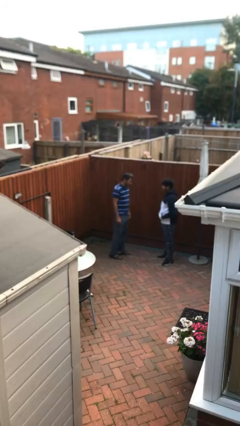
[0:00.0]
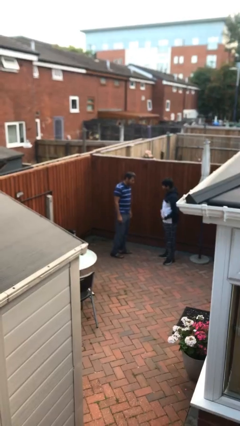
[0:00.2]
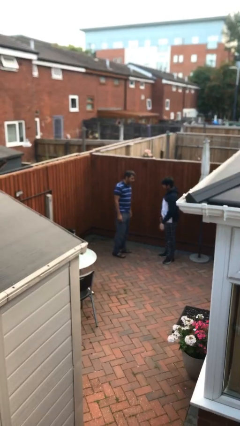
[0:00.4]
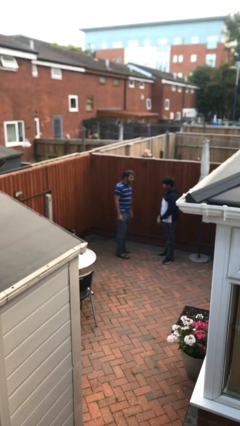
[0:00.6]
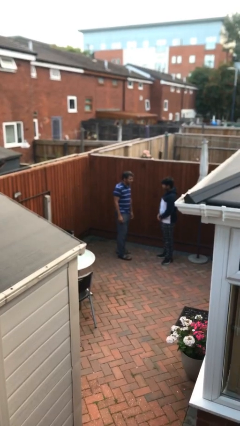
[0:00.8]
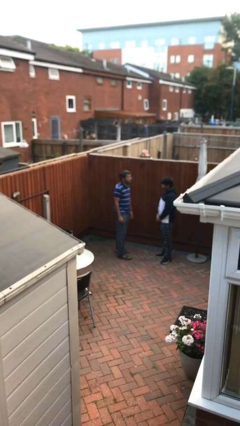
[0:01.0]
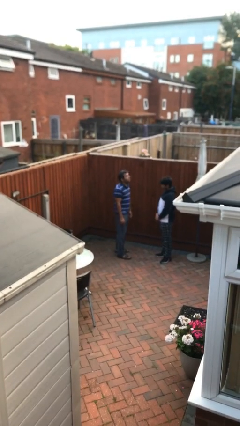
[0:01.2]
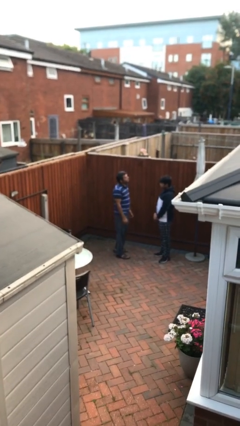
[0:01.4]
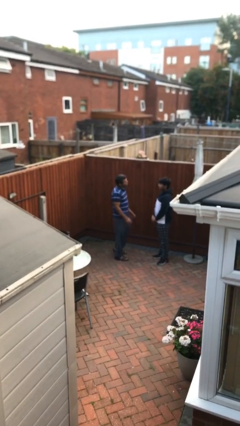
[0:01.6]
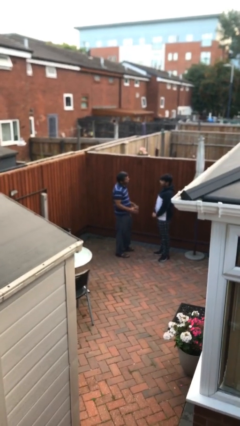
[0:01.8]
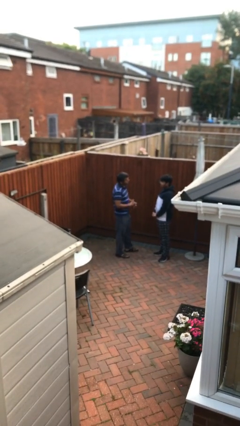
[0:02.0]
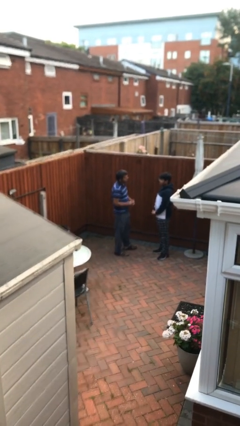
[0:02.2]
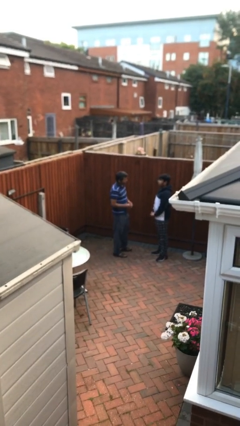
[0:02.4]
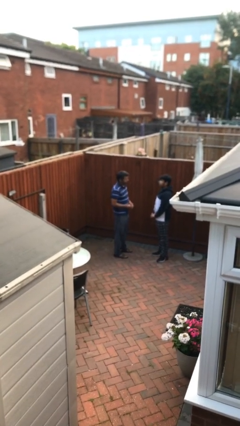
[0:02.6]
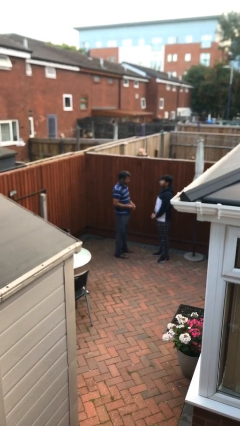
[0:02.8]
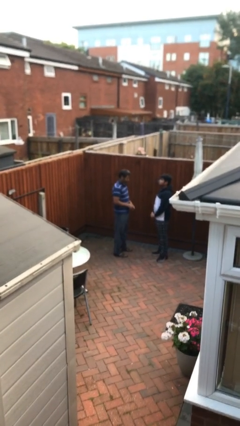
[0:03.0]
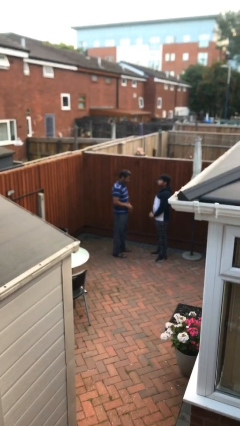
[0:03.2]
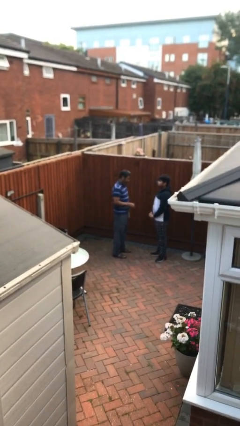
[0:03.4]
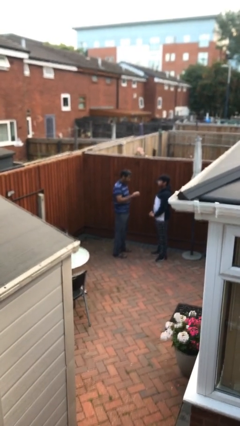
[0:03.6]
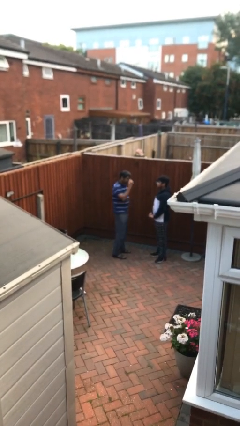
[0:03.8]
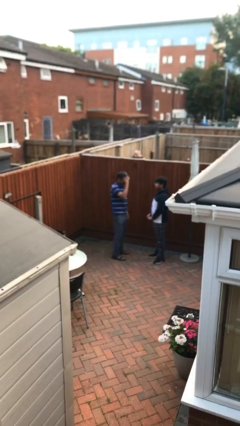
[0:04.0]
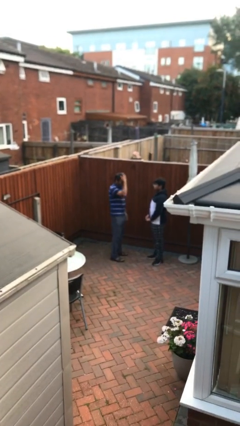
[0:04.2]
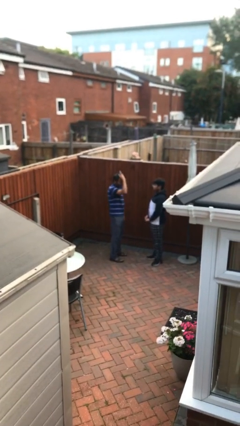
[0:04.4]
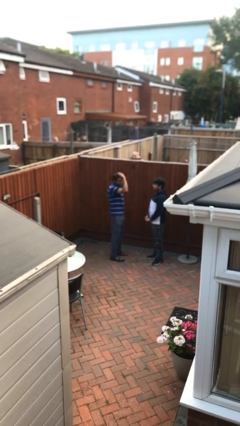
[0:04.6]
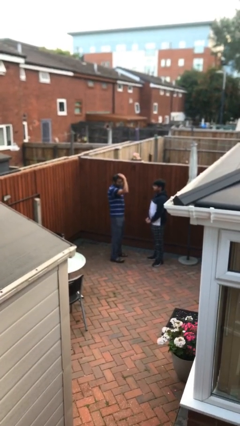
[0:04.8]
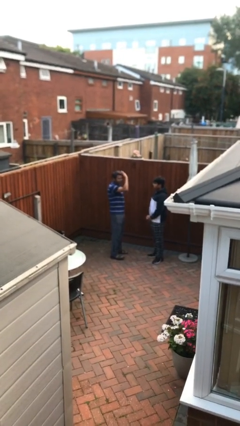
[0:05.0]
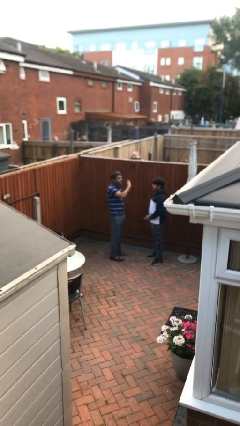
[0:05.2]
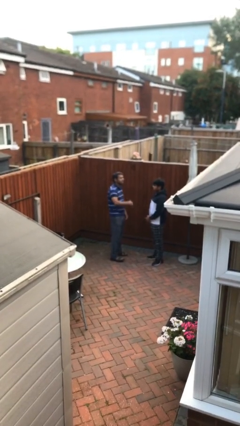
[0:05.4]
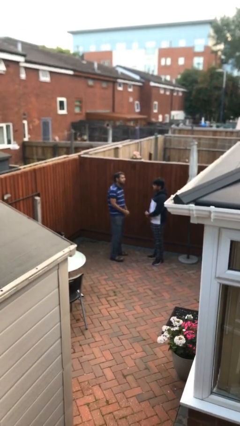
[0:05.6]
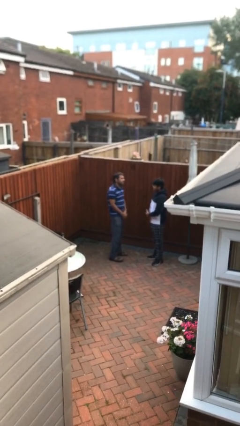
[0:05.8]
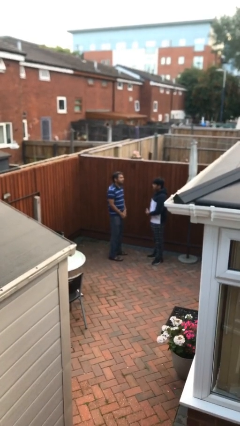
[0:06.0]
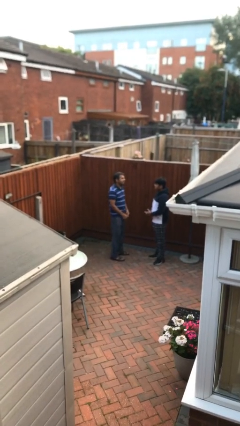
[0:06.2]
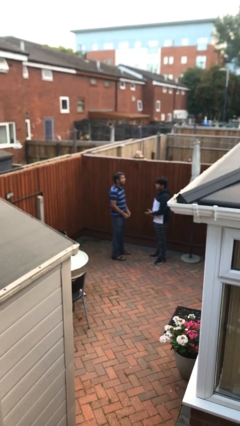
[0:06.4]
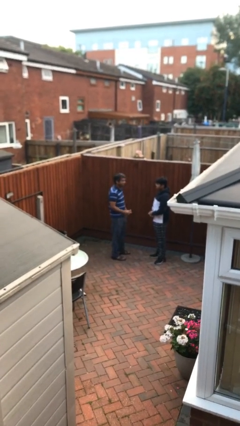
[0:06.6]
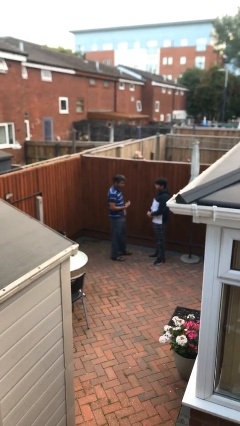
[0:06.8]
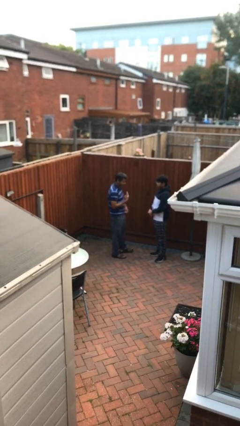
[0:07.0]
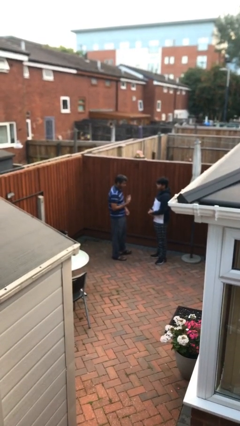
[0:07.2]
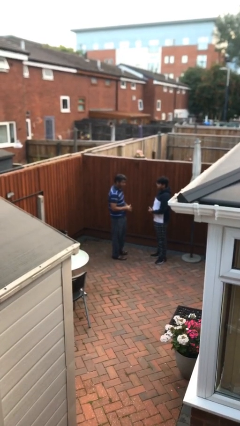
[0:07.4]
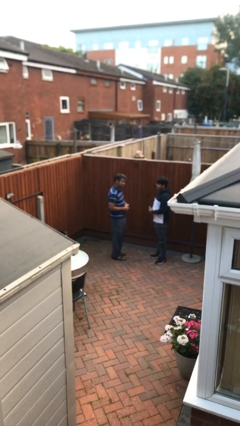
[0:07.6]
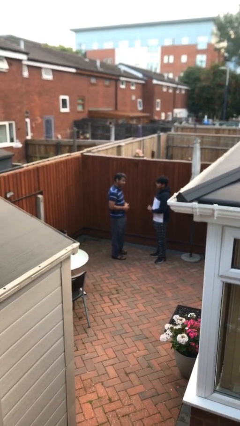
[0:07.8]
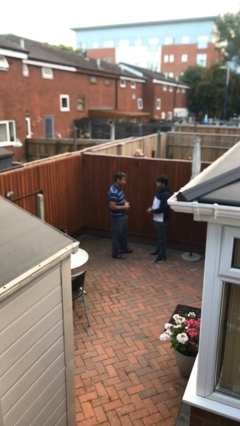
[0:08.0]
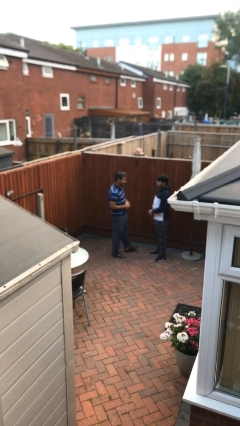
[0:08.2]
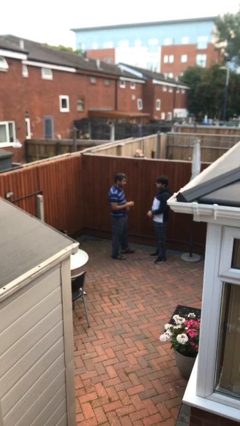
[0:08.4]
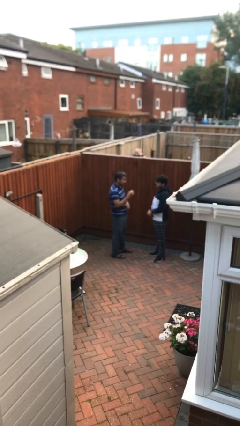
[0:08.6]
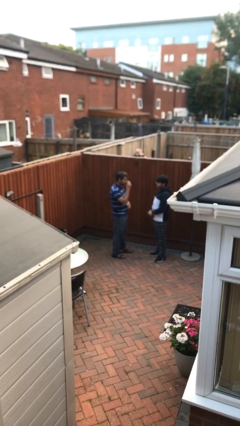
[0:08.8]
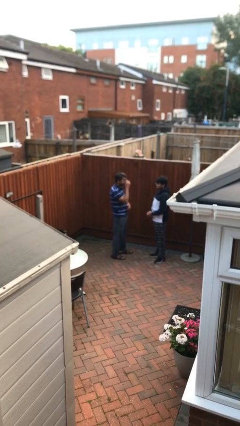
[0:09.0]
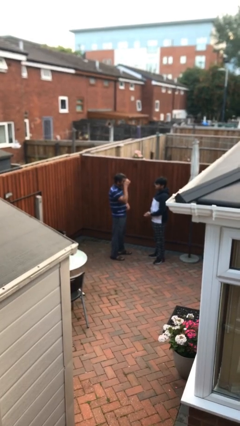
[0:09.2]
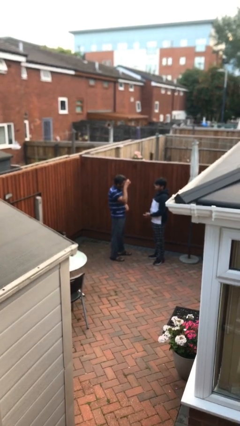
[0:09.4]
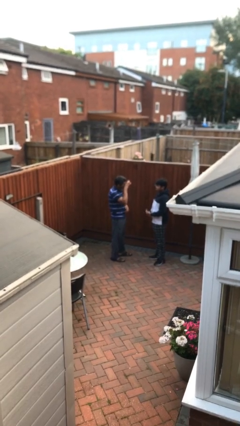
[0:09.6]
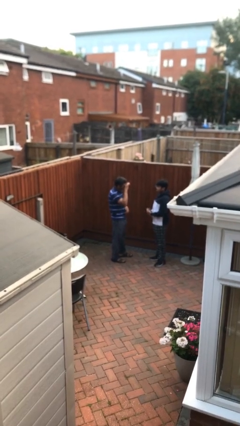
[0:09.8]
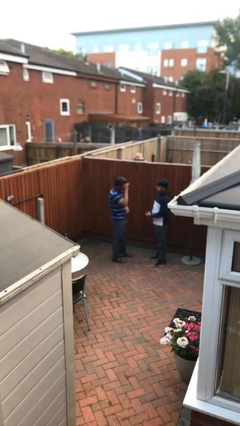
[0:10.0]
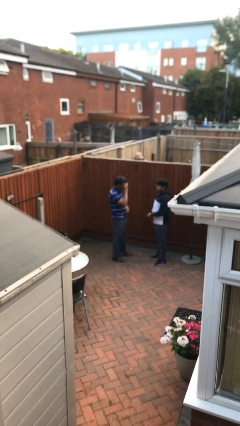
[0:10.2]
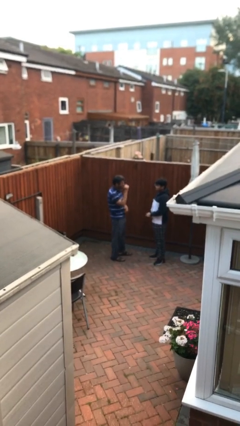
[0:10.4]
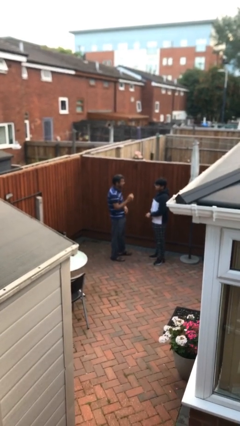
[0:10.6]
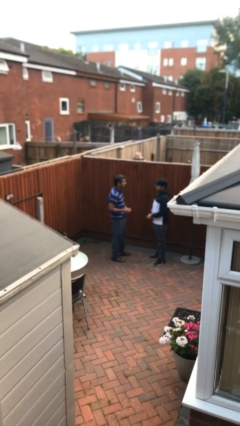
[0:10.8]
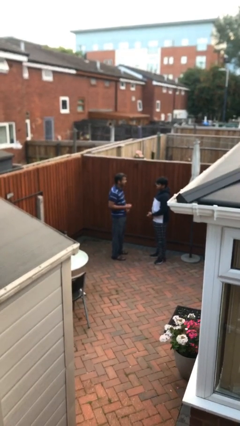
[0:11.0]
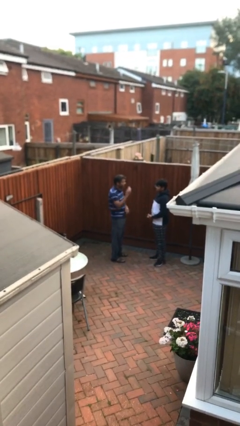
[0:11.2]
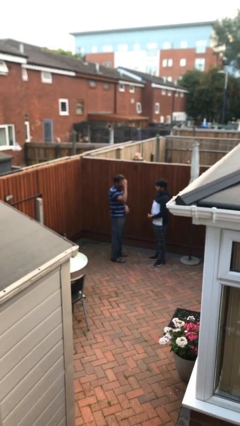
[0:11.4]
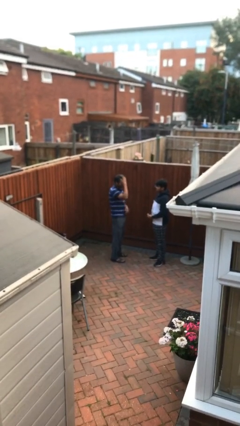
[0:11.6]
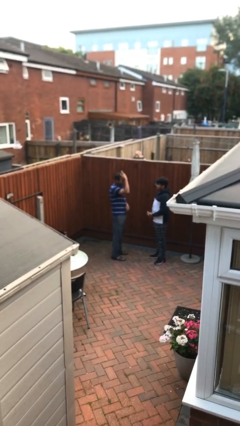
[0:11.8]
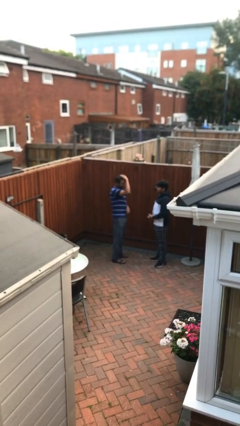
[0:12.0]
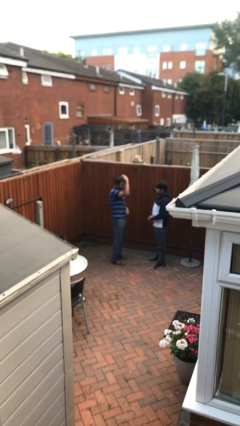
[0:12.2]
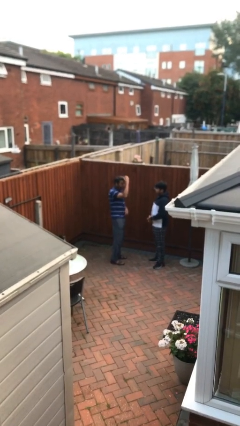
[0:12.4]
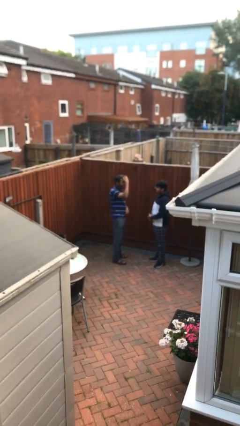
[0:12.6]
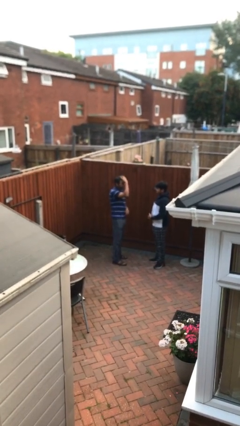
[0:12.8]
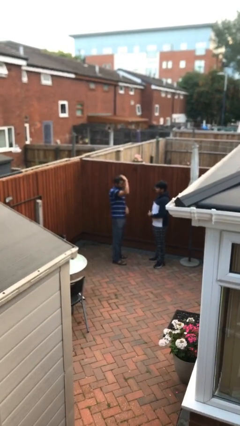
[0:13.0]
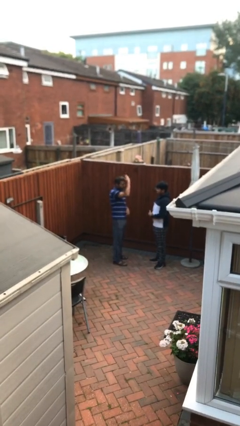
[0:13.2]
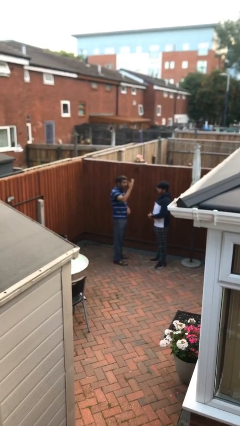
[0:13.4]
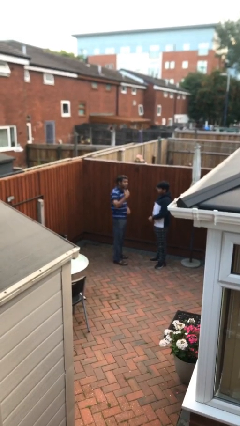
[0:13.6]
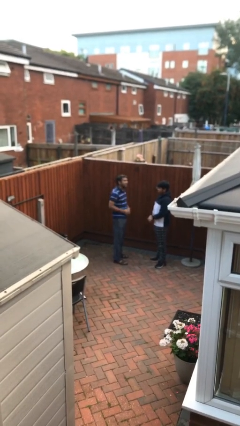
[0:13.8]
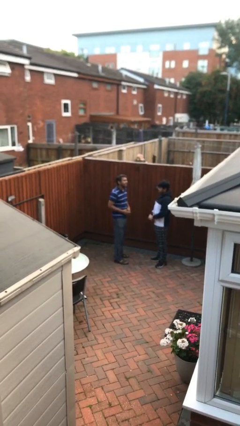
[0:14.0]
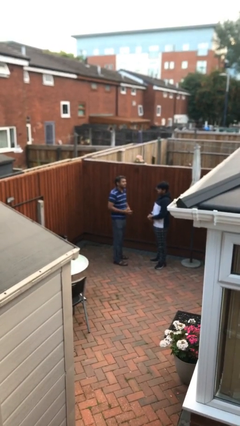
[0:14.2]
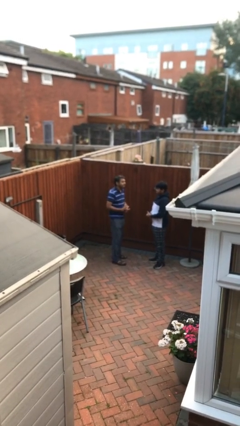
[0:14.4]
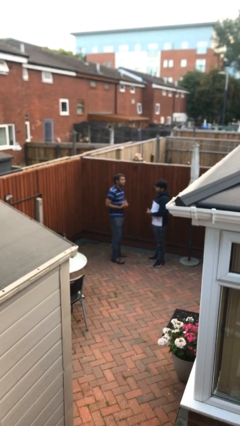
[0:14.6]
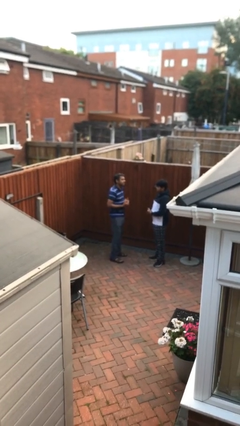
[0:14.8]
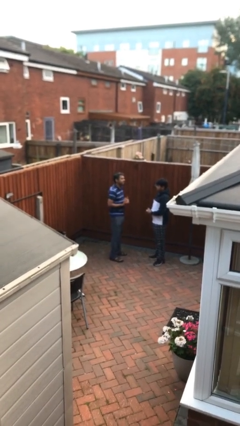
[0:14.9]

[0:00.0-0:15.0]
person talks to person

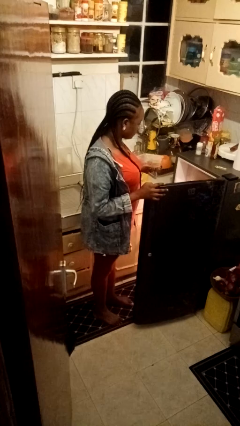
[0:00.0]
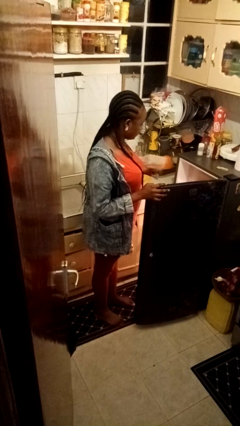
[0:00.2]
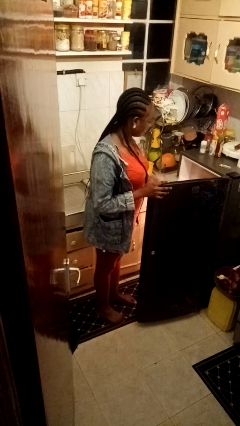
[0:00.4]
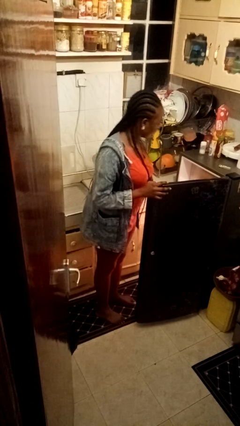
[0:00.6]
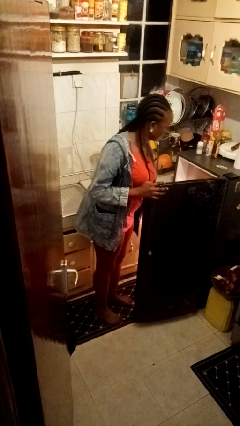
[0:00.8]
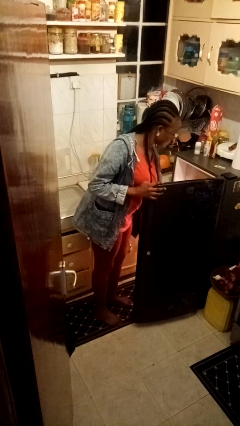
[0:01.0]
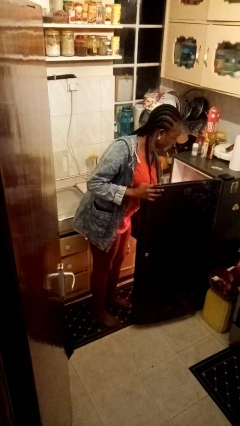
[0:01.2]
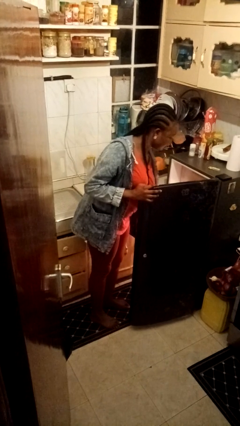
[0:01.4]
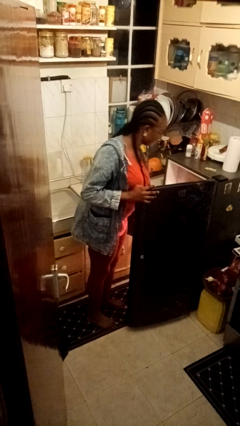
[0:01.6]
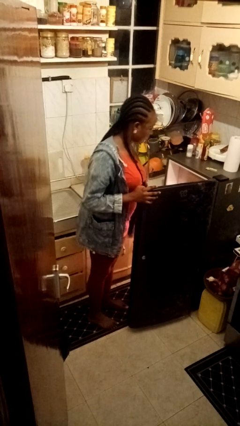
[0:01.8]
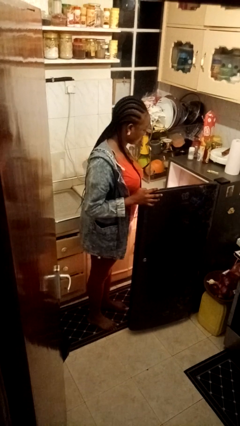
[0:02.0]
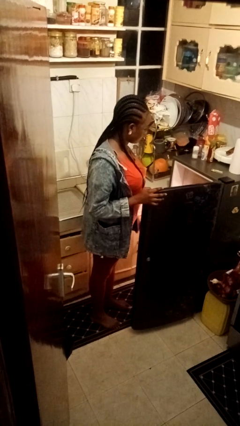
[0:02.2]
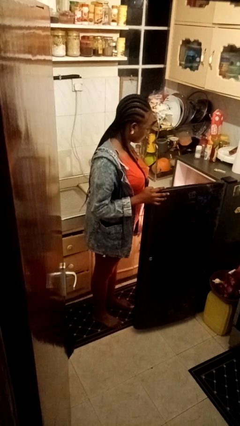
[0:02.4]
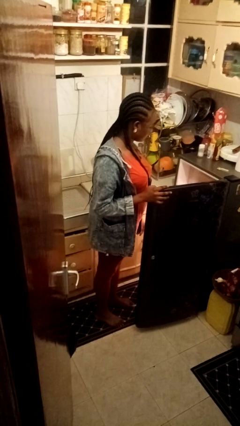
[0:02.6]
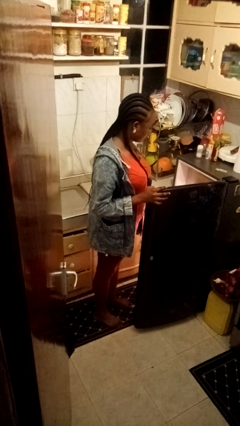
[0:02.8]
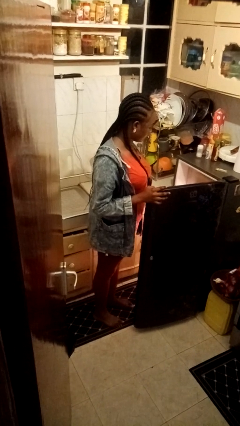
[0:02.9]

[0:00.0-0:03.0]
person puts object into refrigerator

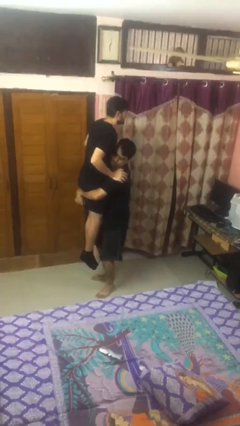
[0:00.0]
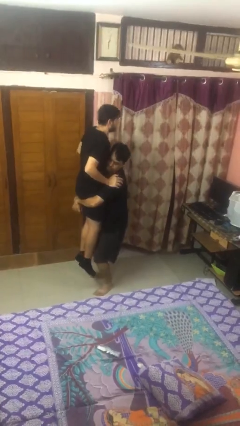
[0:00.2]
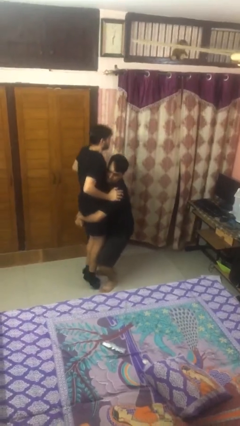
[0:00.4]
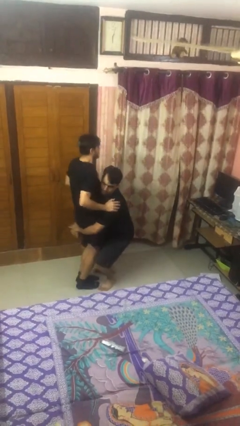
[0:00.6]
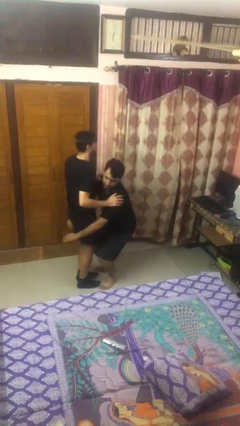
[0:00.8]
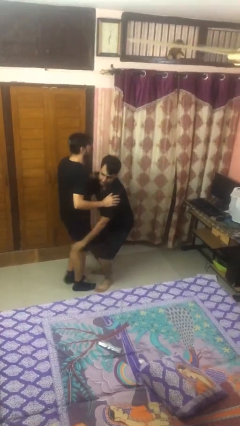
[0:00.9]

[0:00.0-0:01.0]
person puts down person
